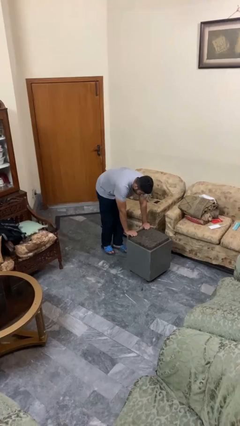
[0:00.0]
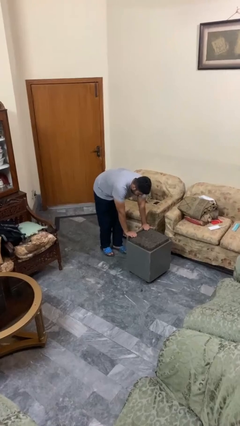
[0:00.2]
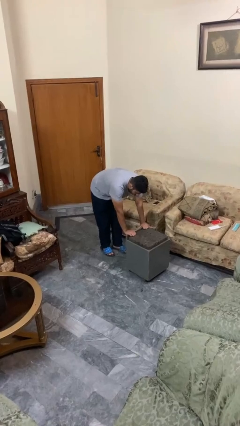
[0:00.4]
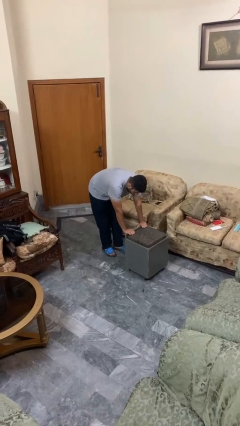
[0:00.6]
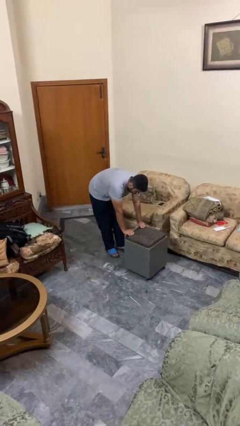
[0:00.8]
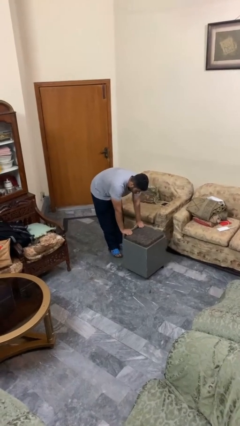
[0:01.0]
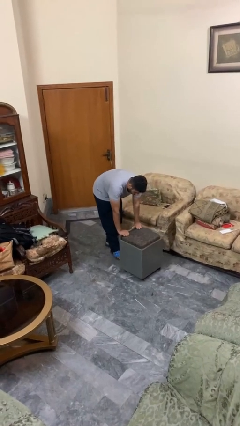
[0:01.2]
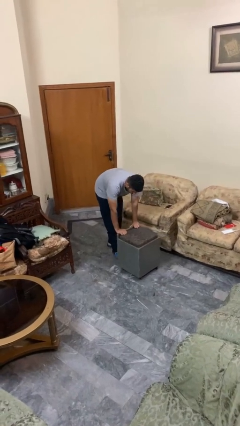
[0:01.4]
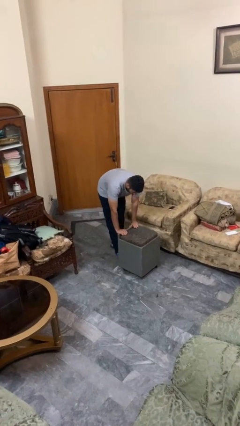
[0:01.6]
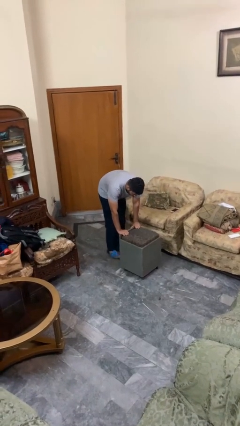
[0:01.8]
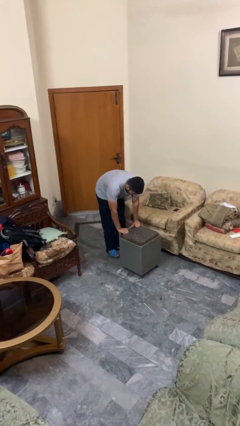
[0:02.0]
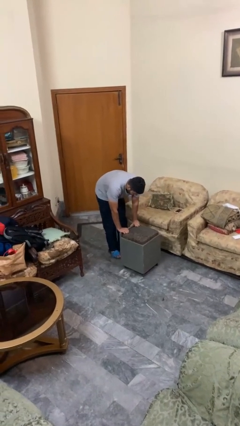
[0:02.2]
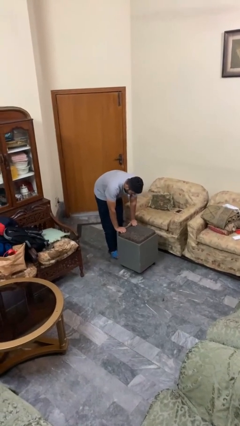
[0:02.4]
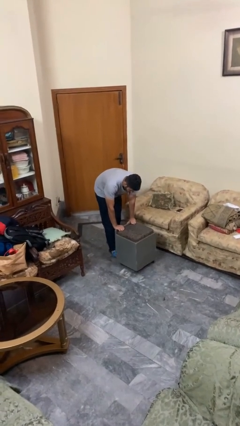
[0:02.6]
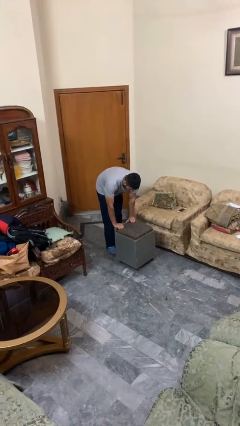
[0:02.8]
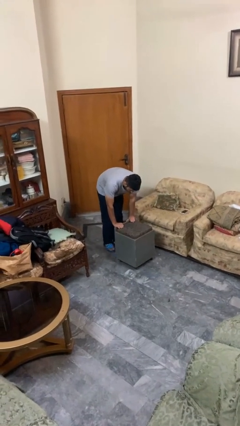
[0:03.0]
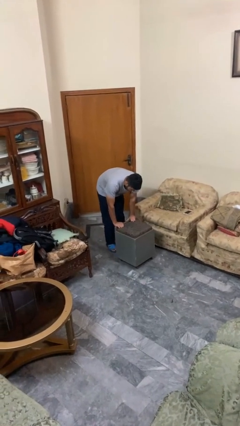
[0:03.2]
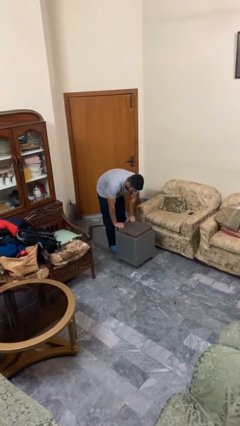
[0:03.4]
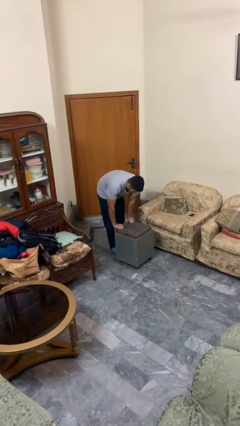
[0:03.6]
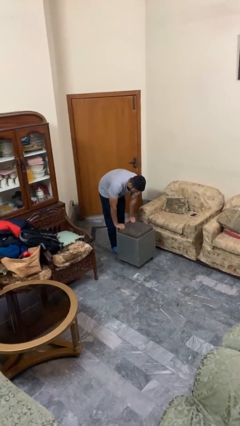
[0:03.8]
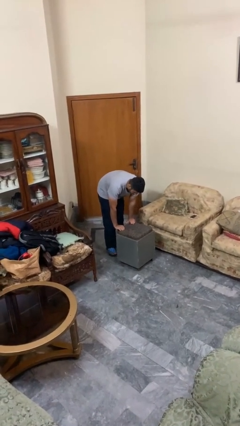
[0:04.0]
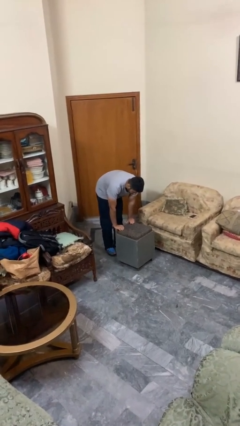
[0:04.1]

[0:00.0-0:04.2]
person pulls wheeled cart

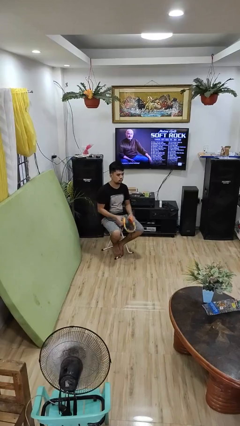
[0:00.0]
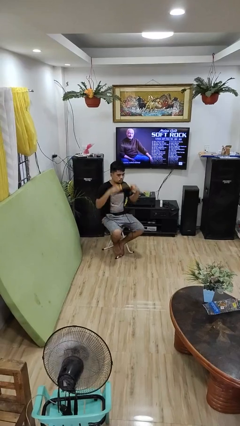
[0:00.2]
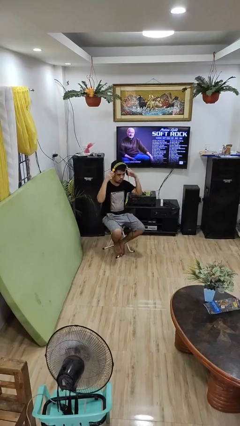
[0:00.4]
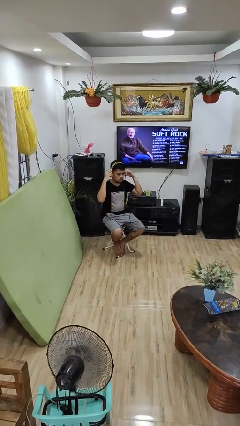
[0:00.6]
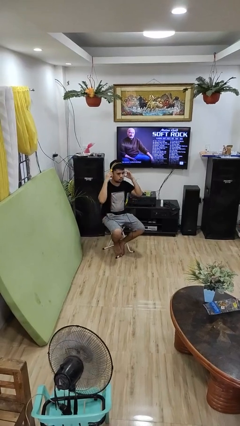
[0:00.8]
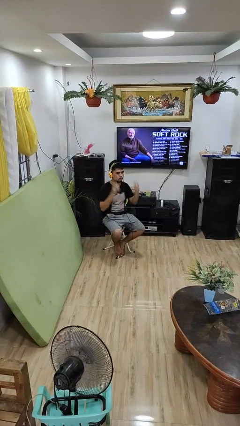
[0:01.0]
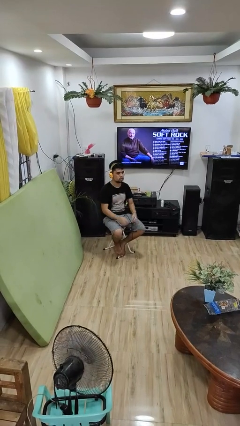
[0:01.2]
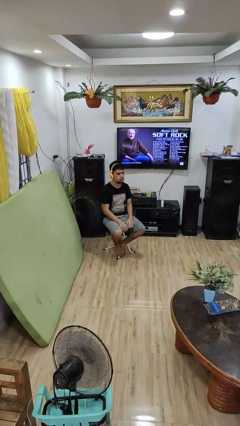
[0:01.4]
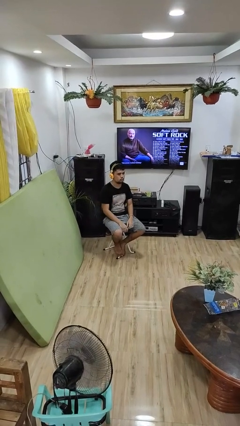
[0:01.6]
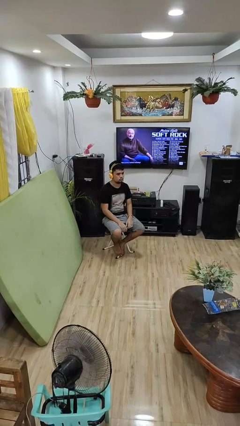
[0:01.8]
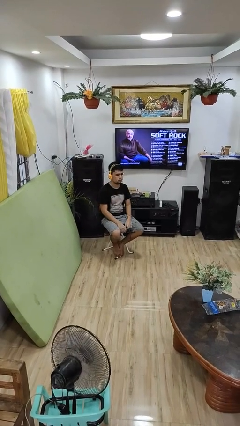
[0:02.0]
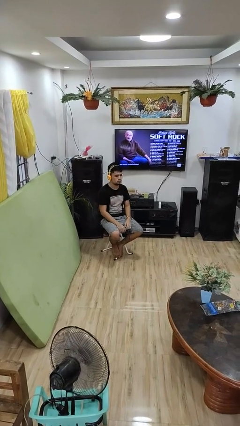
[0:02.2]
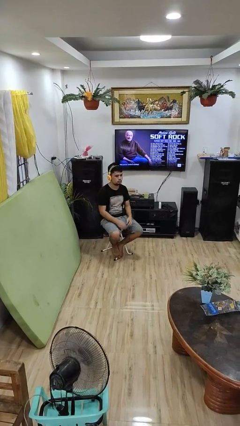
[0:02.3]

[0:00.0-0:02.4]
person puts on headphones

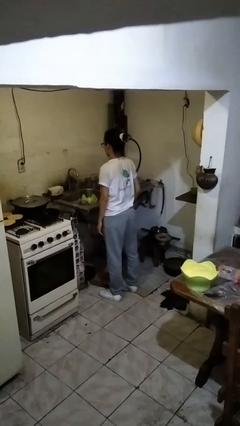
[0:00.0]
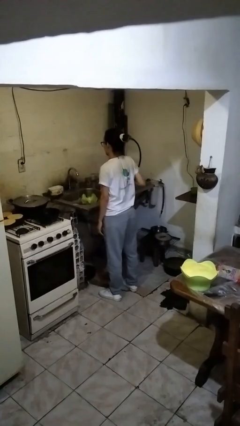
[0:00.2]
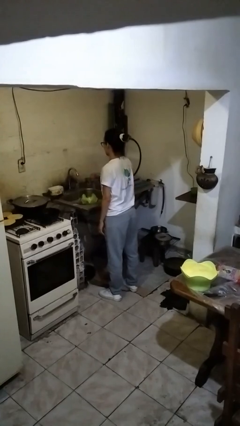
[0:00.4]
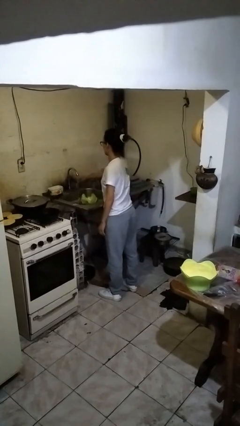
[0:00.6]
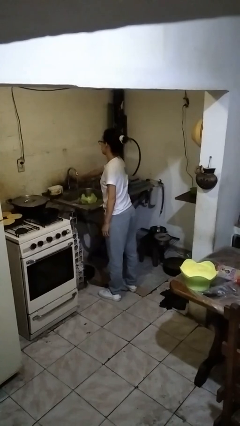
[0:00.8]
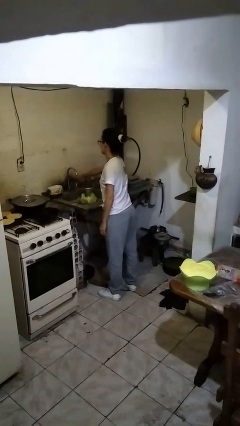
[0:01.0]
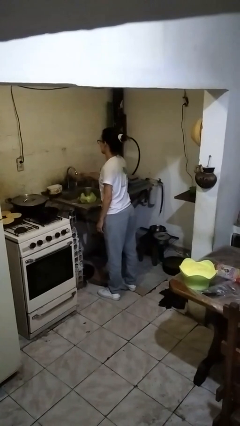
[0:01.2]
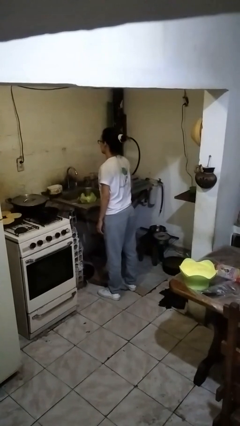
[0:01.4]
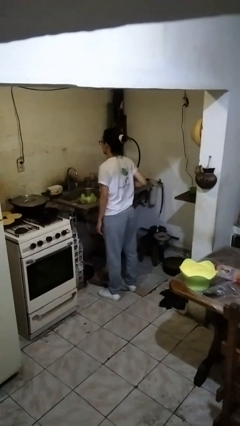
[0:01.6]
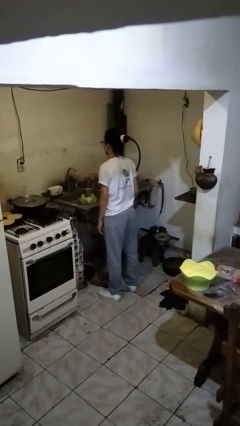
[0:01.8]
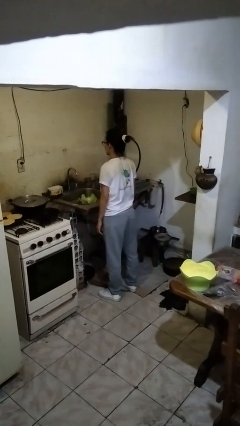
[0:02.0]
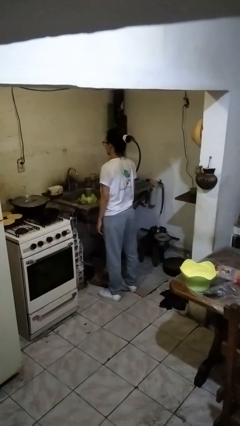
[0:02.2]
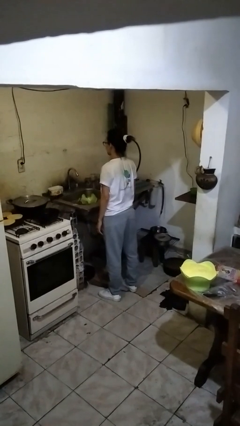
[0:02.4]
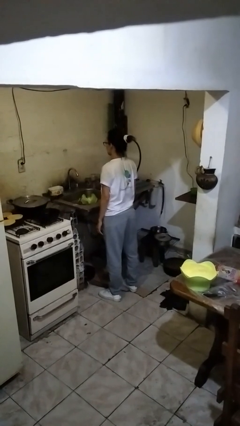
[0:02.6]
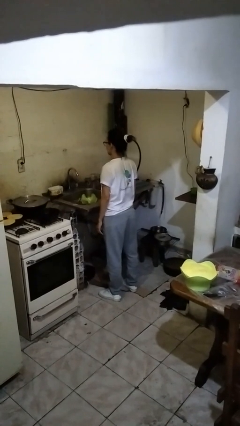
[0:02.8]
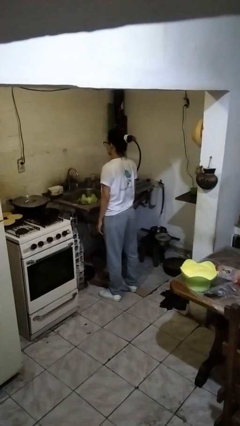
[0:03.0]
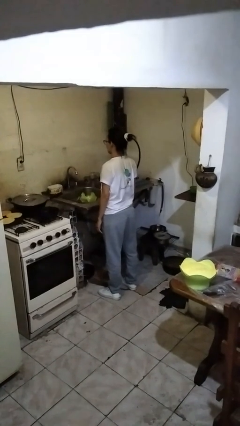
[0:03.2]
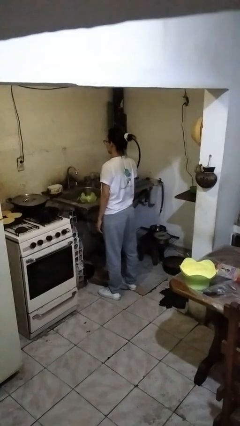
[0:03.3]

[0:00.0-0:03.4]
person turns off faucet

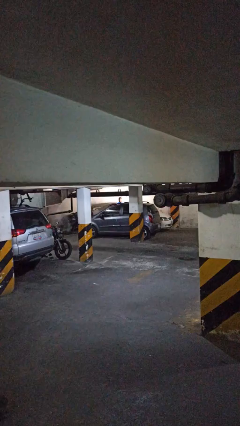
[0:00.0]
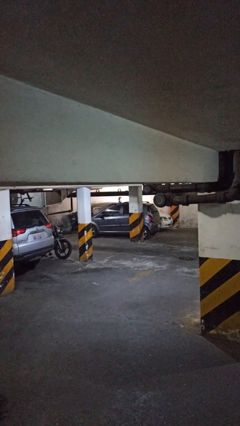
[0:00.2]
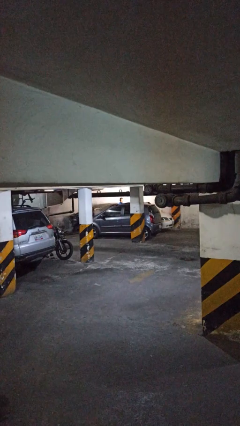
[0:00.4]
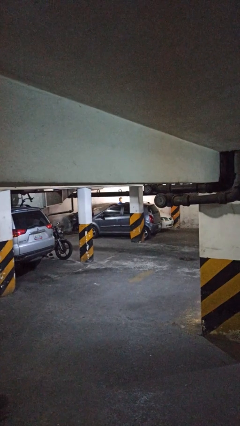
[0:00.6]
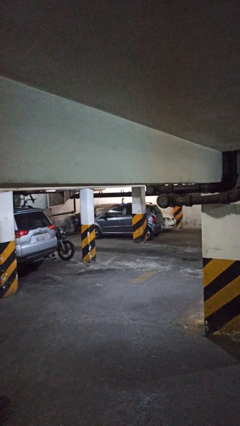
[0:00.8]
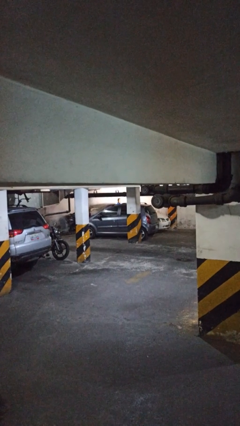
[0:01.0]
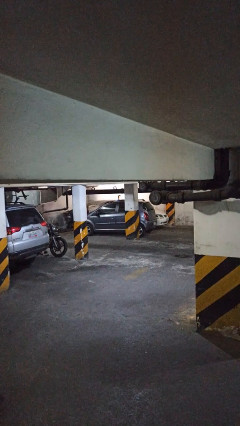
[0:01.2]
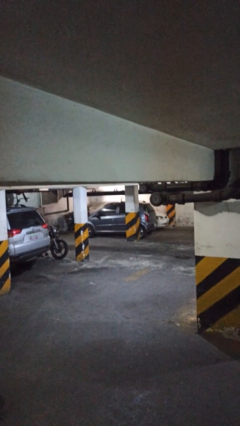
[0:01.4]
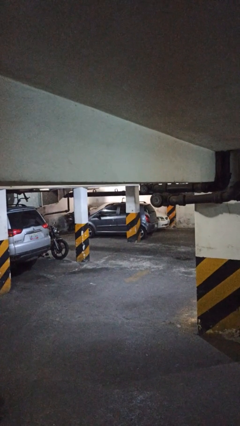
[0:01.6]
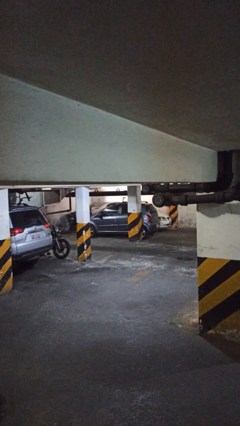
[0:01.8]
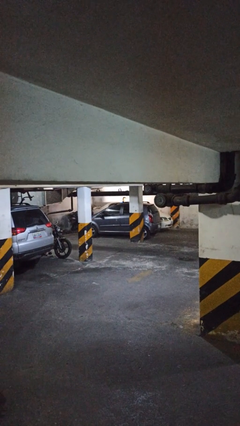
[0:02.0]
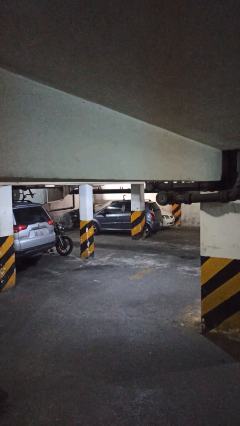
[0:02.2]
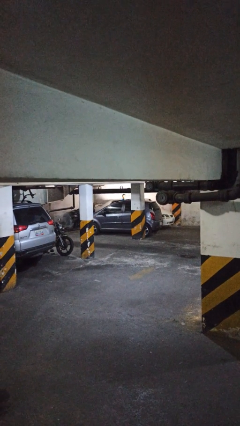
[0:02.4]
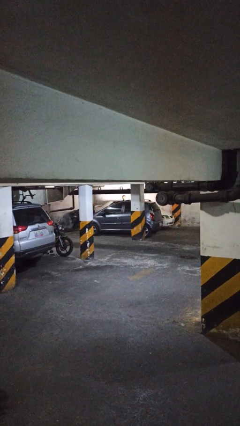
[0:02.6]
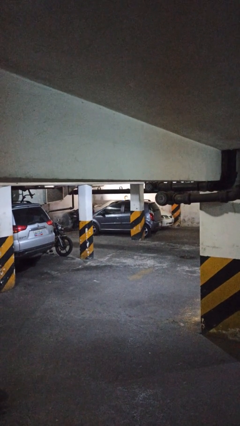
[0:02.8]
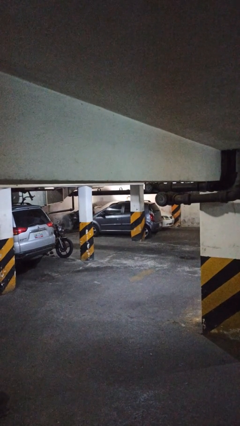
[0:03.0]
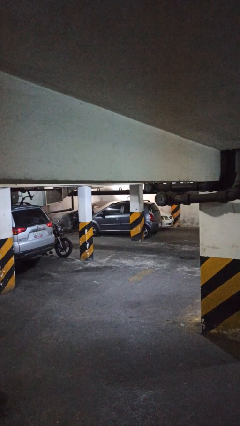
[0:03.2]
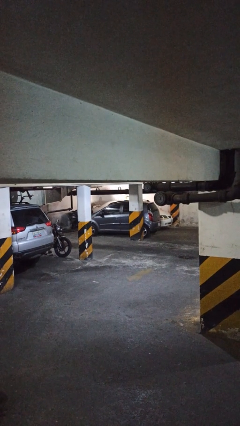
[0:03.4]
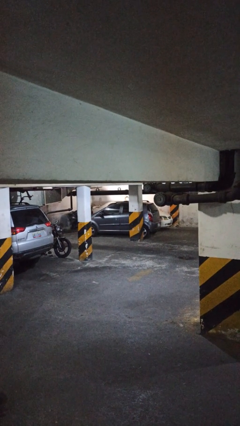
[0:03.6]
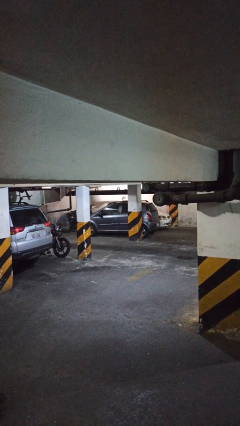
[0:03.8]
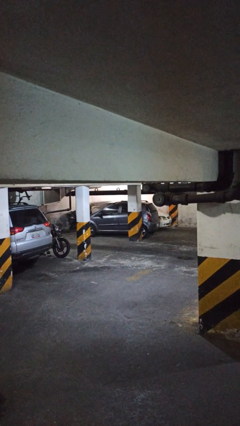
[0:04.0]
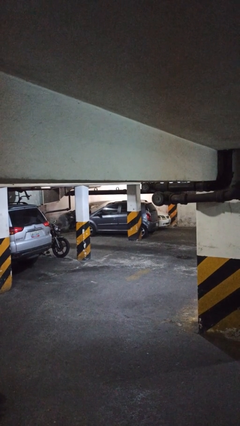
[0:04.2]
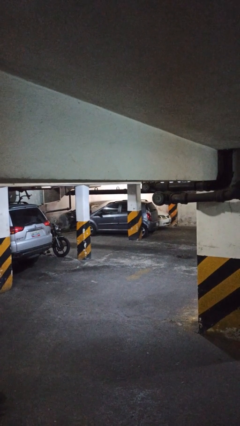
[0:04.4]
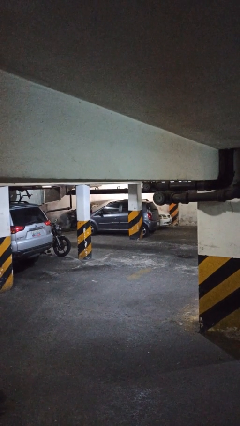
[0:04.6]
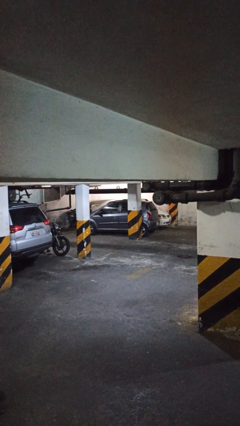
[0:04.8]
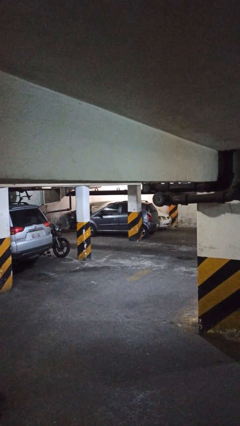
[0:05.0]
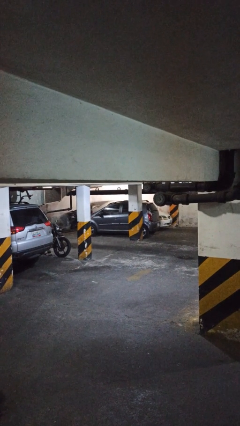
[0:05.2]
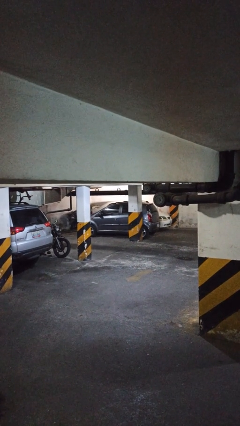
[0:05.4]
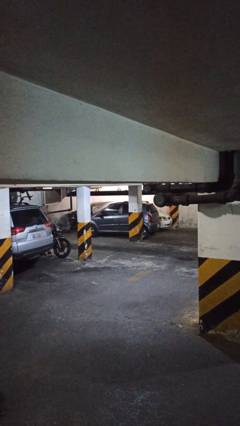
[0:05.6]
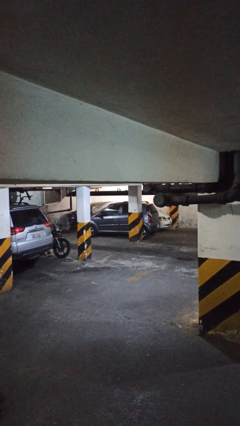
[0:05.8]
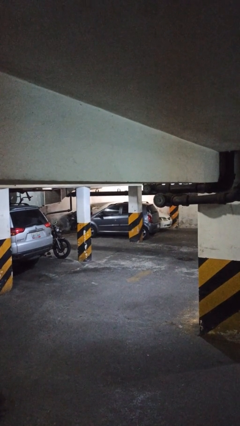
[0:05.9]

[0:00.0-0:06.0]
car picks up person

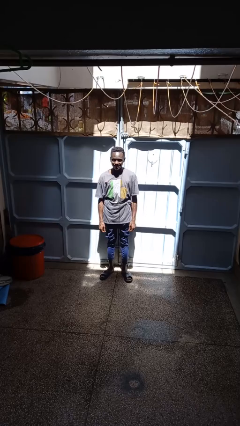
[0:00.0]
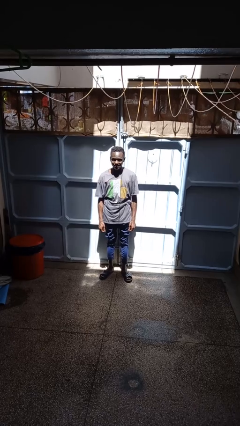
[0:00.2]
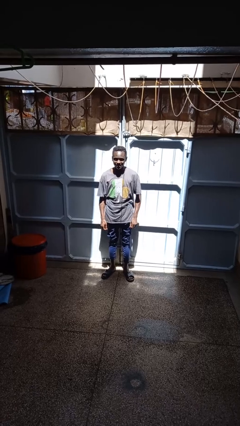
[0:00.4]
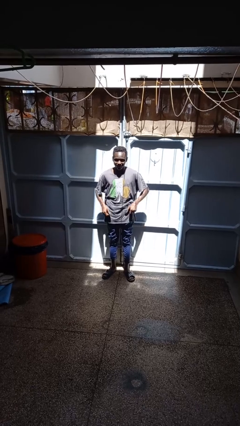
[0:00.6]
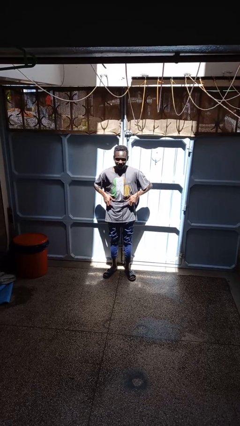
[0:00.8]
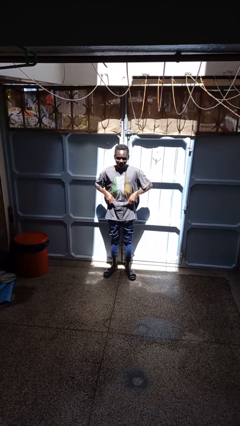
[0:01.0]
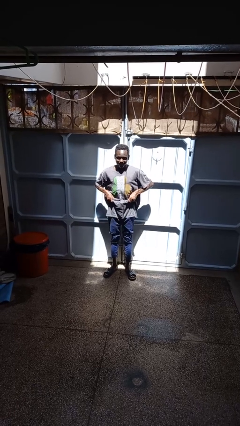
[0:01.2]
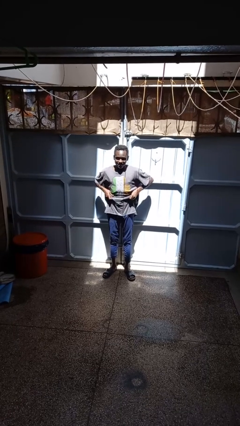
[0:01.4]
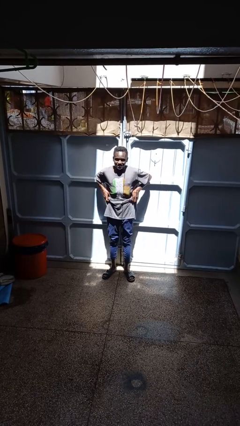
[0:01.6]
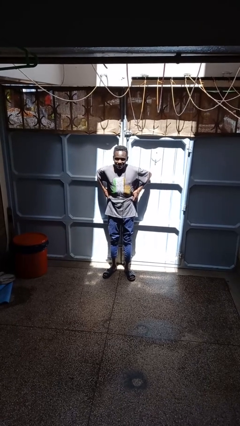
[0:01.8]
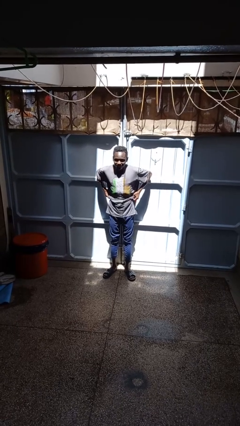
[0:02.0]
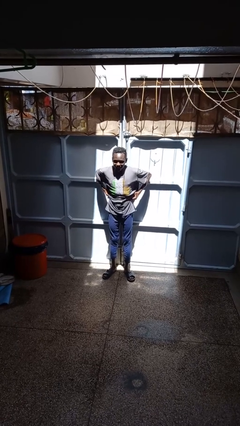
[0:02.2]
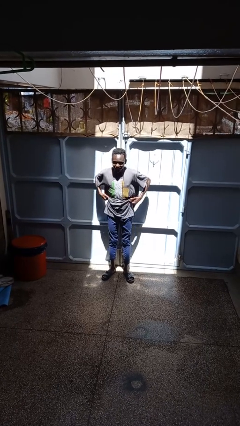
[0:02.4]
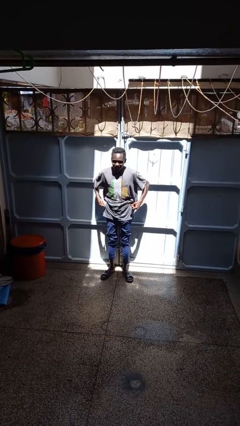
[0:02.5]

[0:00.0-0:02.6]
person hikes up pants
